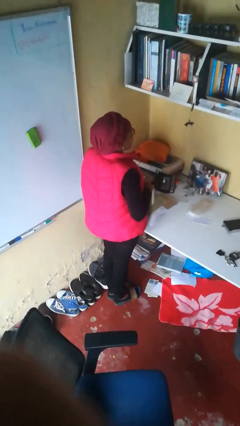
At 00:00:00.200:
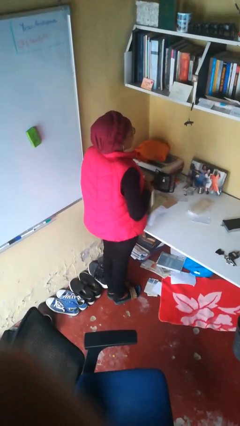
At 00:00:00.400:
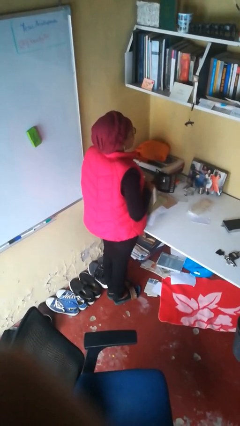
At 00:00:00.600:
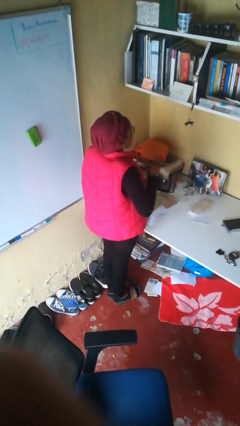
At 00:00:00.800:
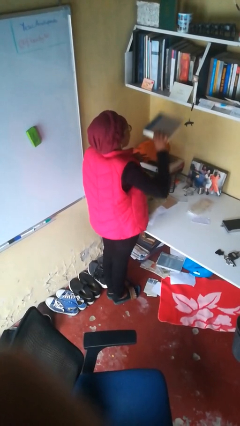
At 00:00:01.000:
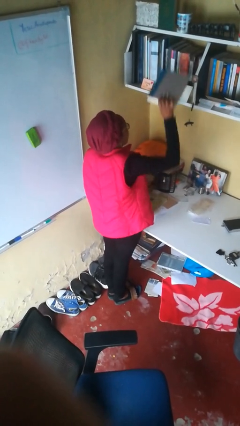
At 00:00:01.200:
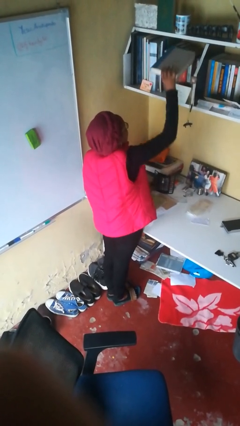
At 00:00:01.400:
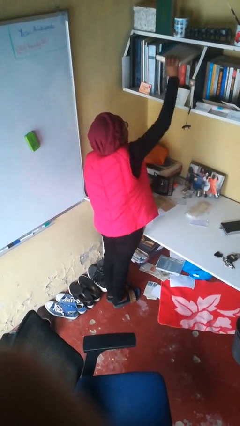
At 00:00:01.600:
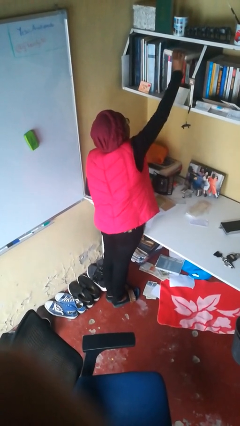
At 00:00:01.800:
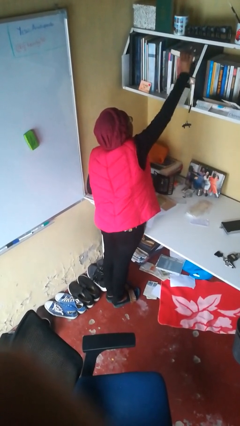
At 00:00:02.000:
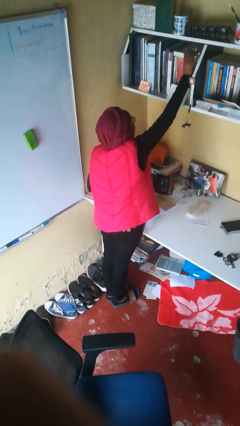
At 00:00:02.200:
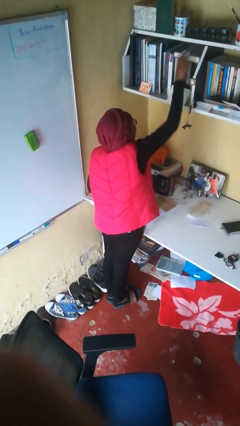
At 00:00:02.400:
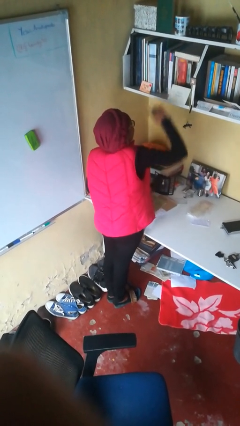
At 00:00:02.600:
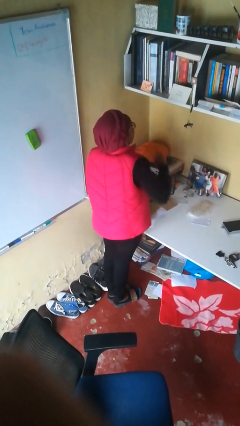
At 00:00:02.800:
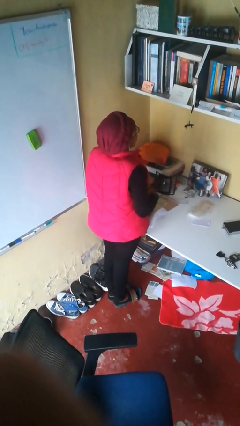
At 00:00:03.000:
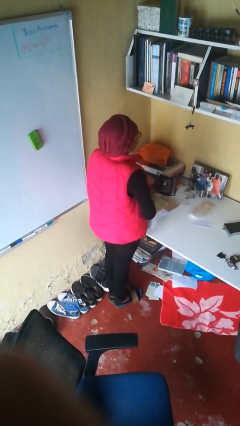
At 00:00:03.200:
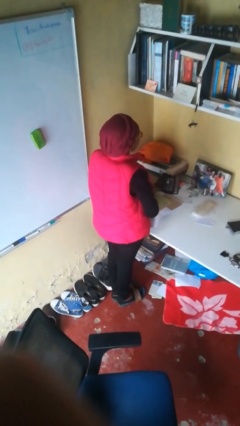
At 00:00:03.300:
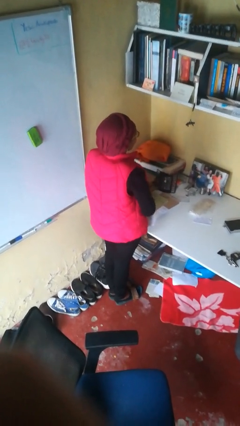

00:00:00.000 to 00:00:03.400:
person puts down object on shelf

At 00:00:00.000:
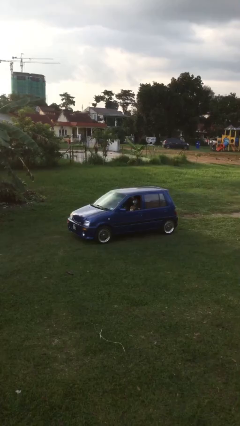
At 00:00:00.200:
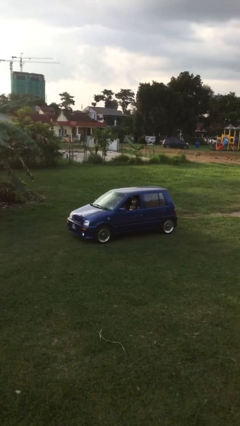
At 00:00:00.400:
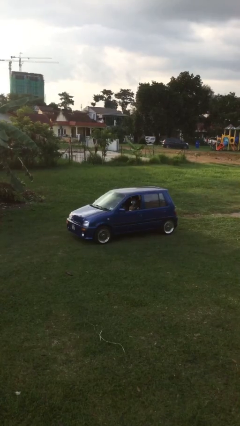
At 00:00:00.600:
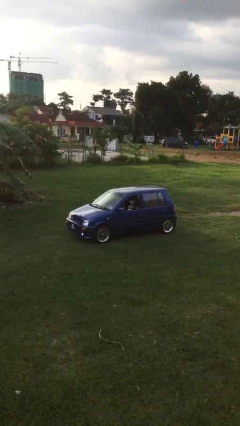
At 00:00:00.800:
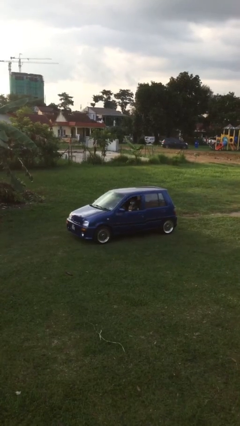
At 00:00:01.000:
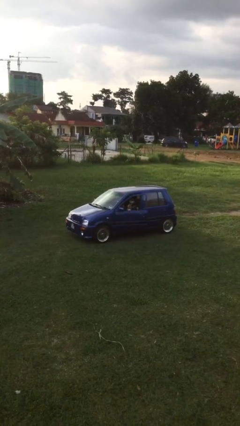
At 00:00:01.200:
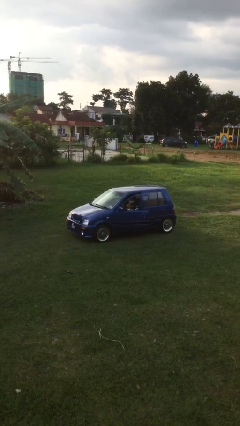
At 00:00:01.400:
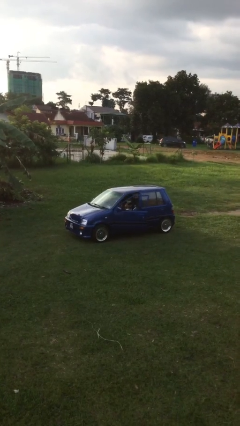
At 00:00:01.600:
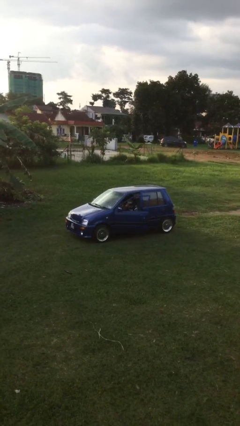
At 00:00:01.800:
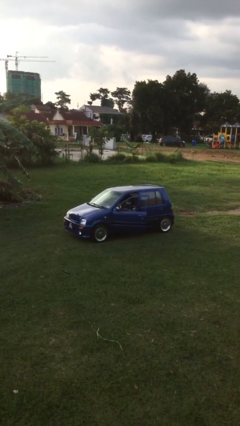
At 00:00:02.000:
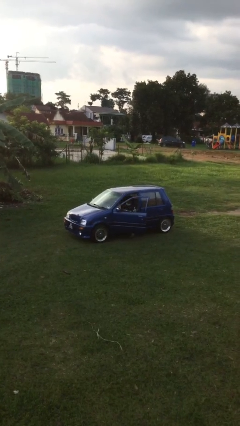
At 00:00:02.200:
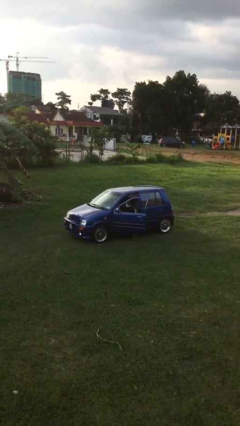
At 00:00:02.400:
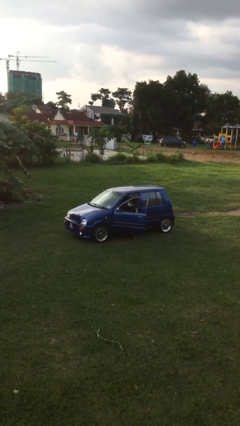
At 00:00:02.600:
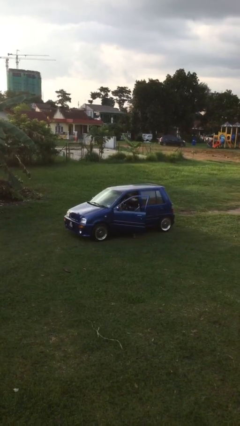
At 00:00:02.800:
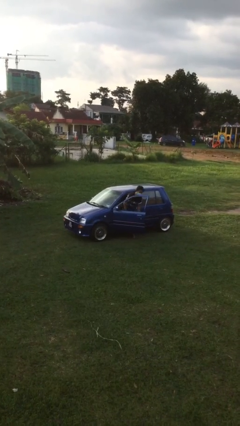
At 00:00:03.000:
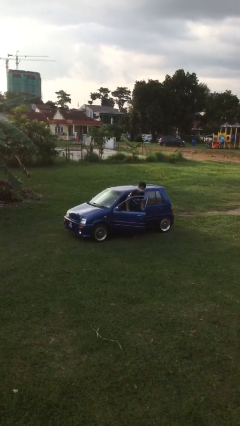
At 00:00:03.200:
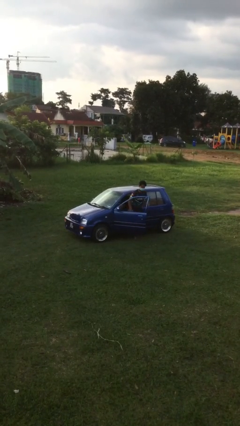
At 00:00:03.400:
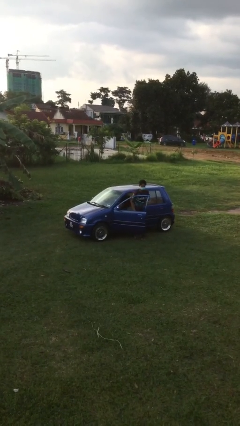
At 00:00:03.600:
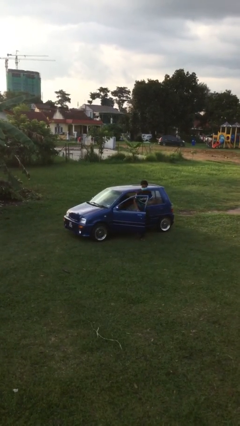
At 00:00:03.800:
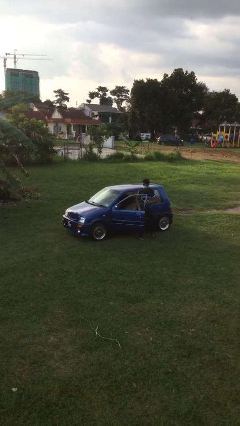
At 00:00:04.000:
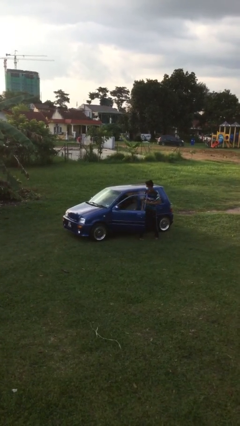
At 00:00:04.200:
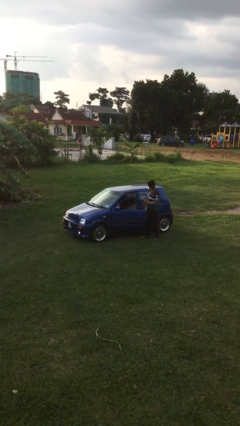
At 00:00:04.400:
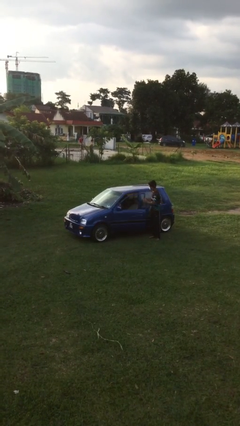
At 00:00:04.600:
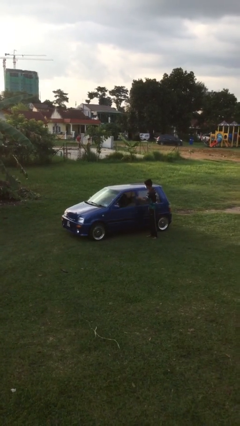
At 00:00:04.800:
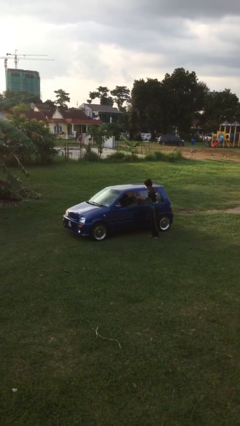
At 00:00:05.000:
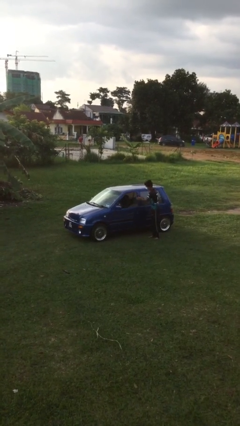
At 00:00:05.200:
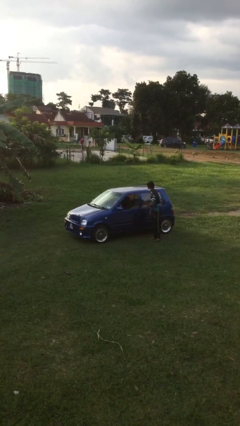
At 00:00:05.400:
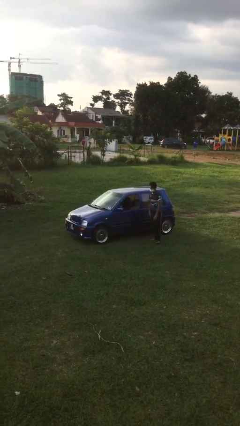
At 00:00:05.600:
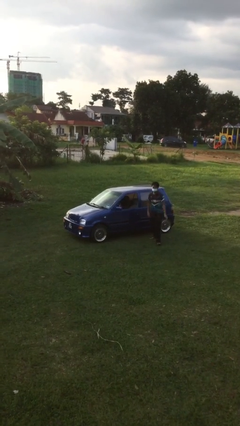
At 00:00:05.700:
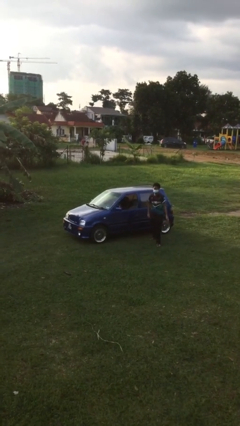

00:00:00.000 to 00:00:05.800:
car drops off person

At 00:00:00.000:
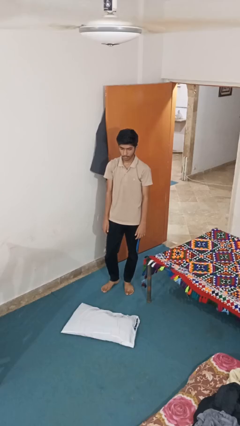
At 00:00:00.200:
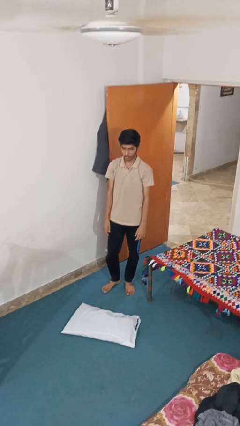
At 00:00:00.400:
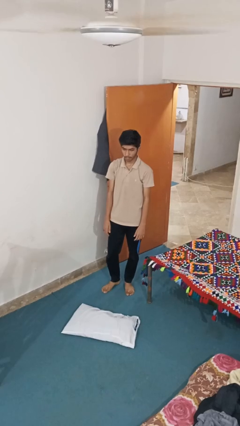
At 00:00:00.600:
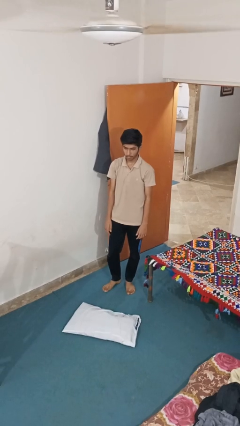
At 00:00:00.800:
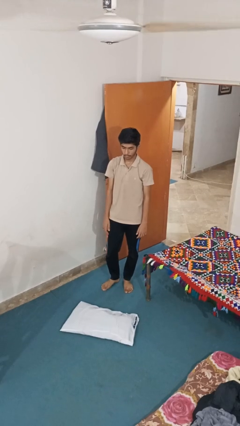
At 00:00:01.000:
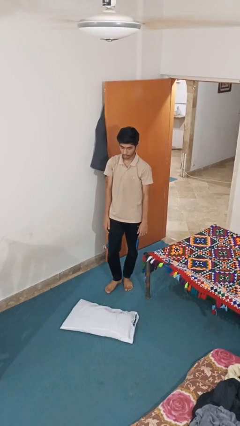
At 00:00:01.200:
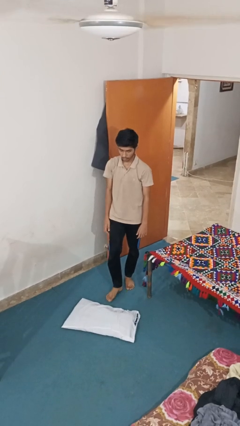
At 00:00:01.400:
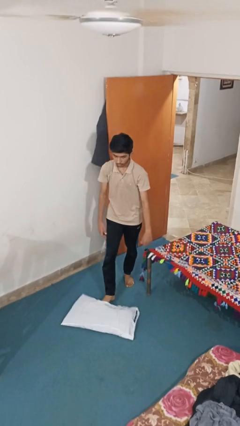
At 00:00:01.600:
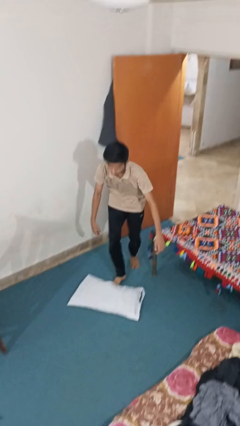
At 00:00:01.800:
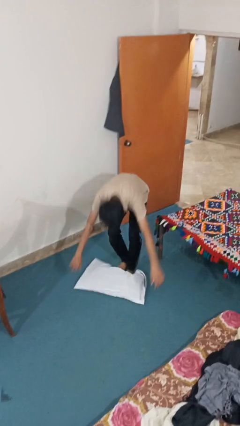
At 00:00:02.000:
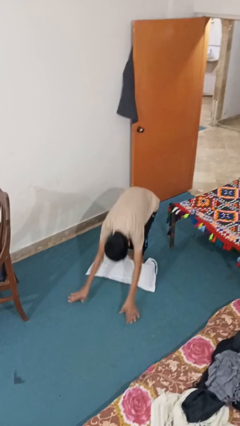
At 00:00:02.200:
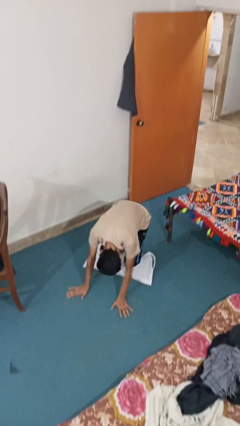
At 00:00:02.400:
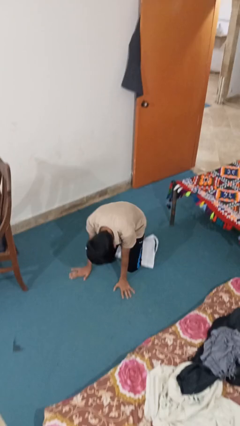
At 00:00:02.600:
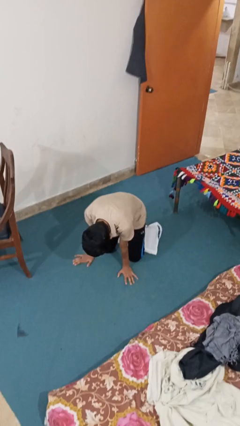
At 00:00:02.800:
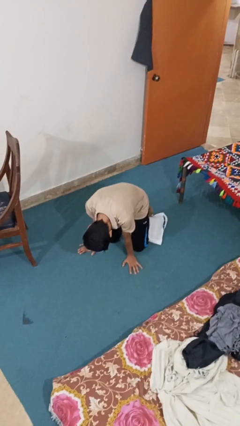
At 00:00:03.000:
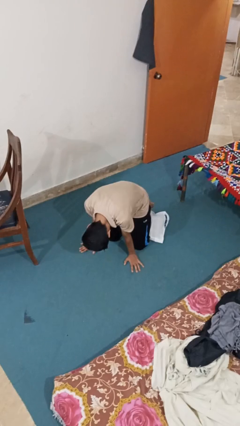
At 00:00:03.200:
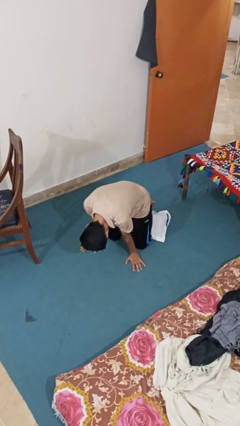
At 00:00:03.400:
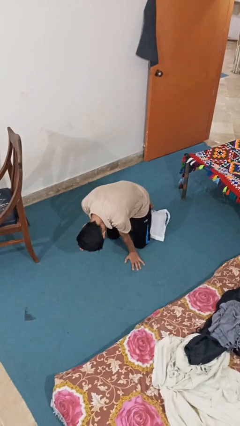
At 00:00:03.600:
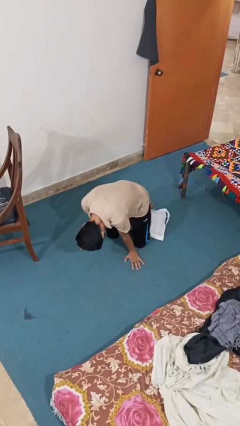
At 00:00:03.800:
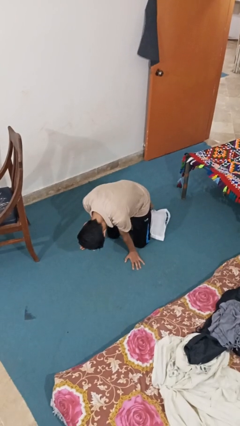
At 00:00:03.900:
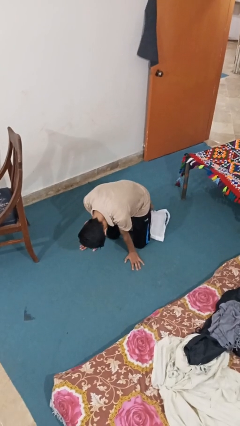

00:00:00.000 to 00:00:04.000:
person trips on object on floor

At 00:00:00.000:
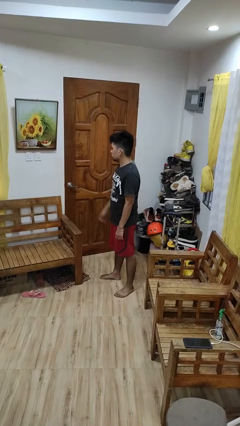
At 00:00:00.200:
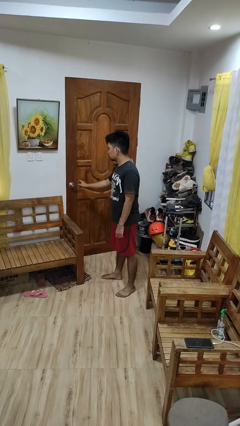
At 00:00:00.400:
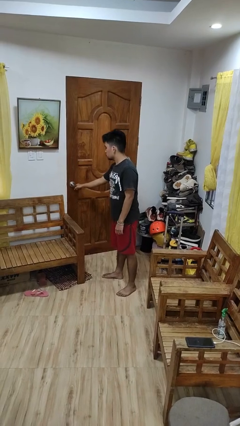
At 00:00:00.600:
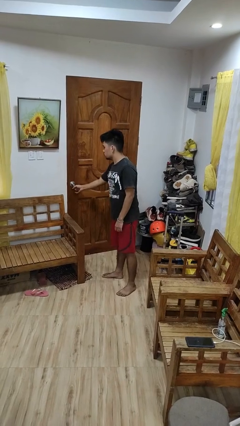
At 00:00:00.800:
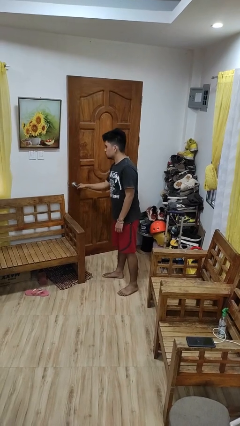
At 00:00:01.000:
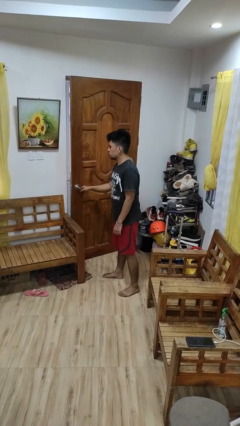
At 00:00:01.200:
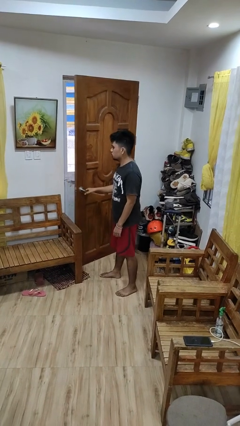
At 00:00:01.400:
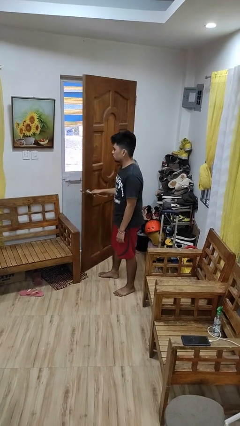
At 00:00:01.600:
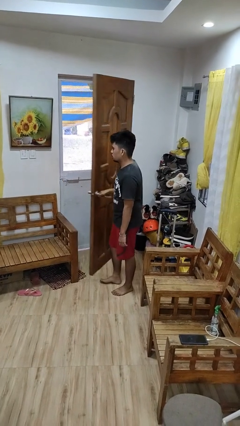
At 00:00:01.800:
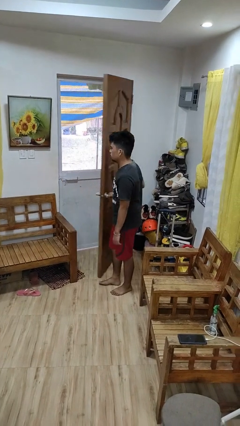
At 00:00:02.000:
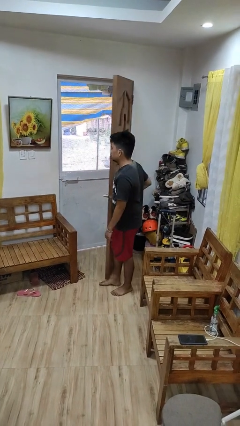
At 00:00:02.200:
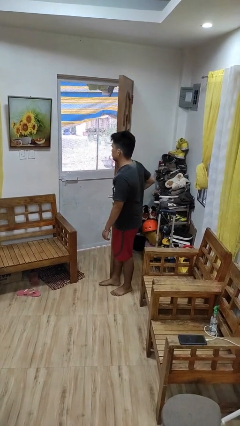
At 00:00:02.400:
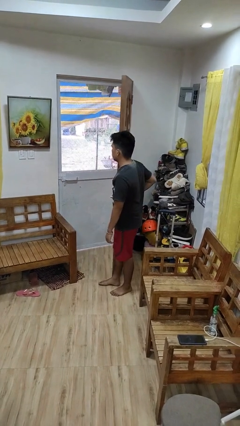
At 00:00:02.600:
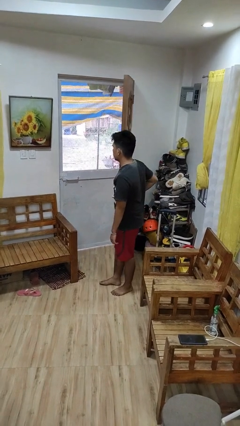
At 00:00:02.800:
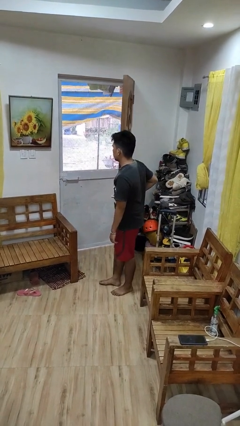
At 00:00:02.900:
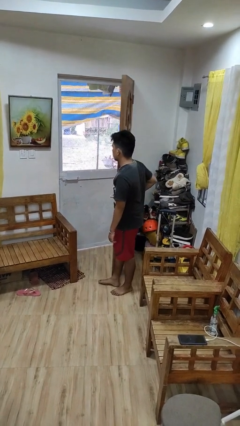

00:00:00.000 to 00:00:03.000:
person opens facility door

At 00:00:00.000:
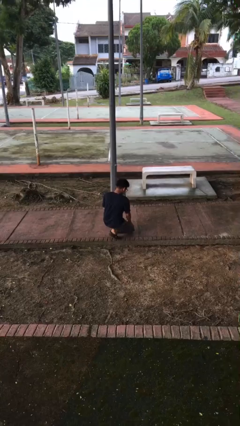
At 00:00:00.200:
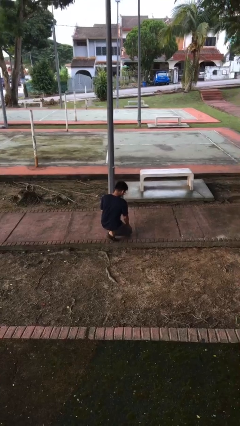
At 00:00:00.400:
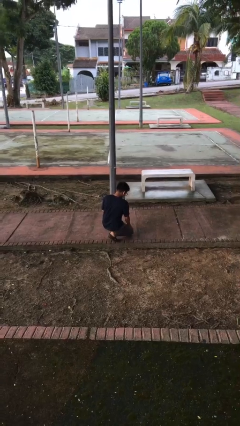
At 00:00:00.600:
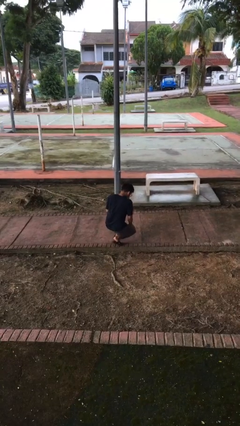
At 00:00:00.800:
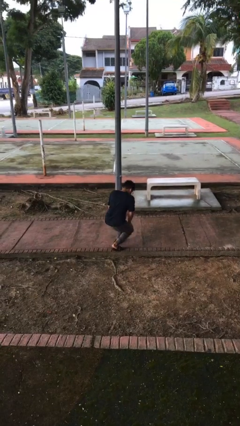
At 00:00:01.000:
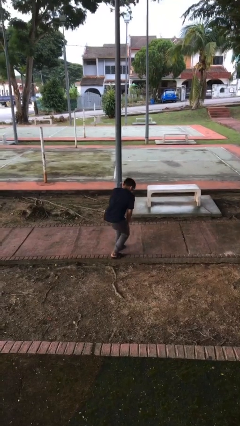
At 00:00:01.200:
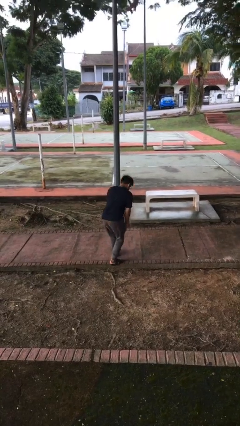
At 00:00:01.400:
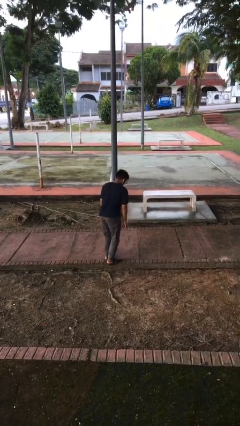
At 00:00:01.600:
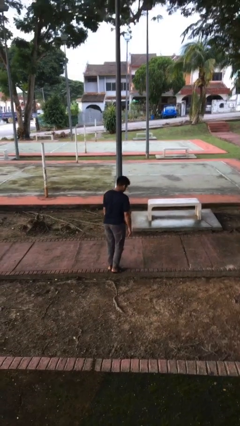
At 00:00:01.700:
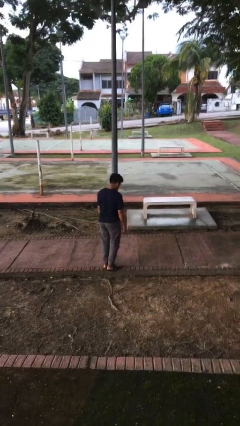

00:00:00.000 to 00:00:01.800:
person stands up from floor
